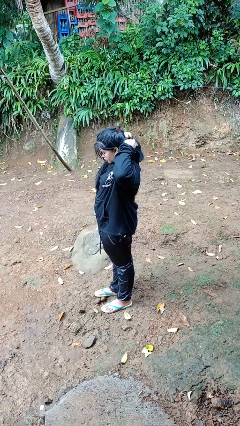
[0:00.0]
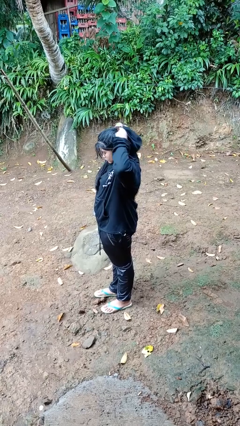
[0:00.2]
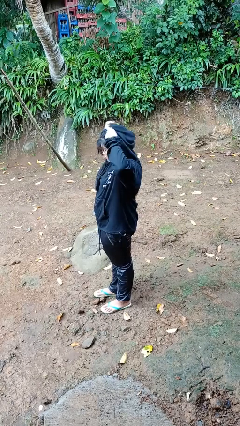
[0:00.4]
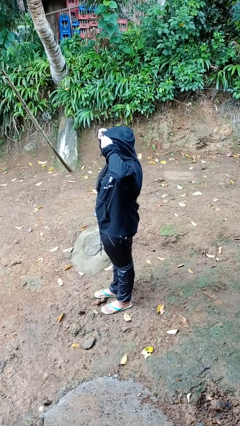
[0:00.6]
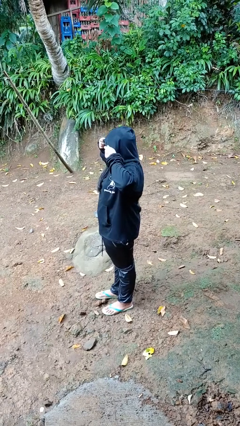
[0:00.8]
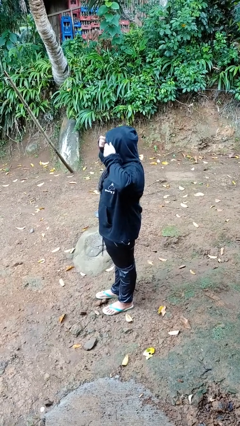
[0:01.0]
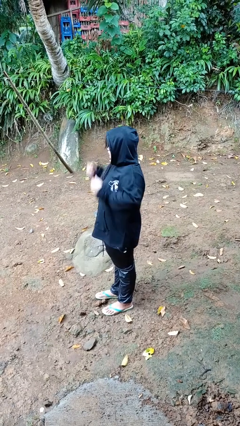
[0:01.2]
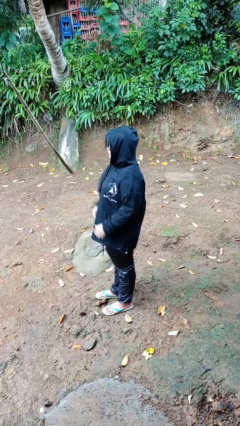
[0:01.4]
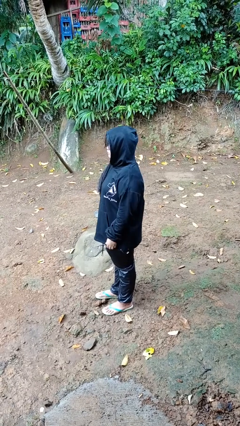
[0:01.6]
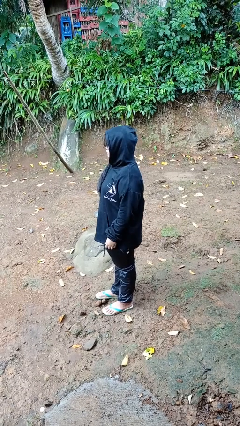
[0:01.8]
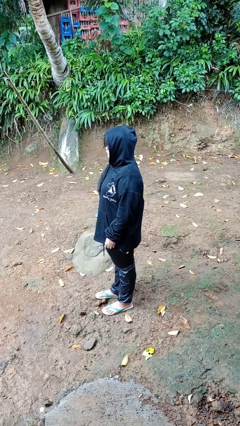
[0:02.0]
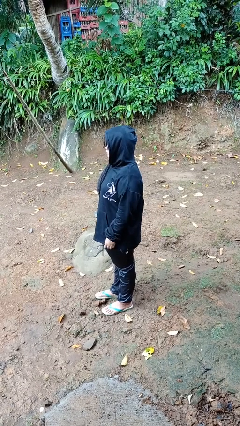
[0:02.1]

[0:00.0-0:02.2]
person puts on hoodie

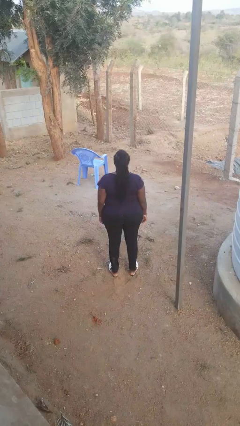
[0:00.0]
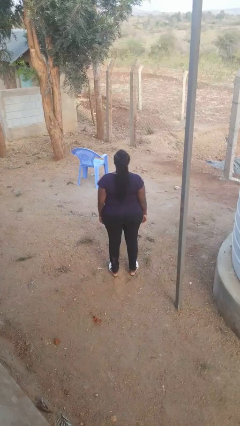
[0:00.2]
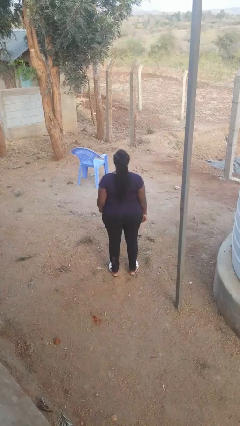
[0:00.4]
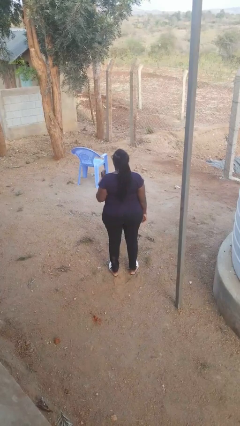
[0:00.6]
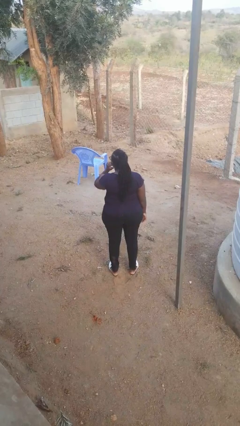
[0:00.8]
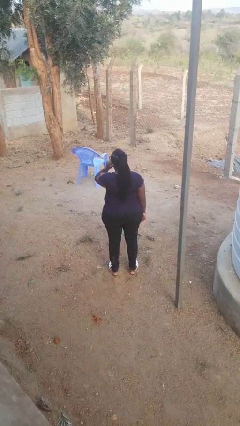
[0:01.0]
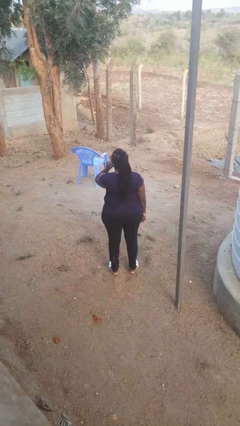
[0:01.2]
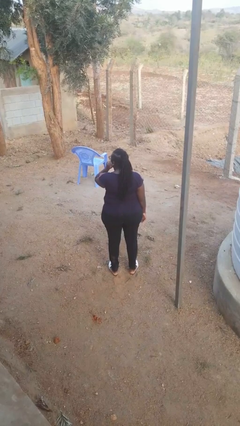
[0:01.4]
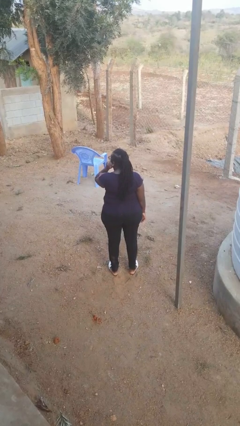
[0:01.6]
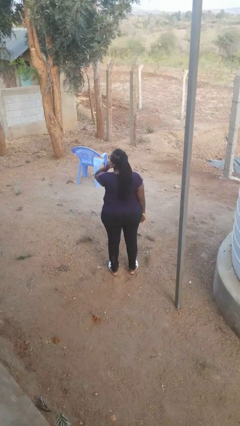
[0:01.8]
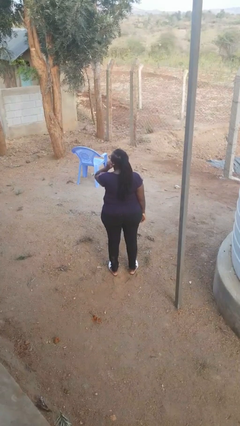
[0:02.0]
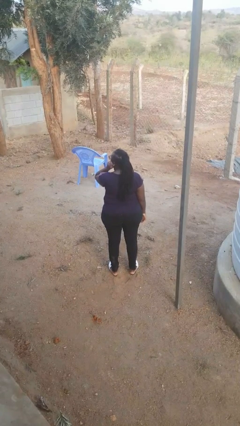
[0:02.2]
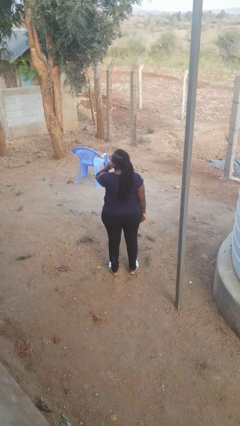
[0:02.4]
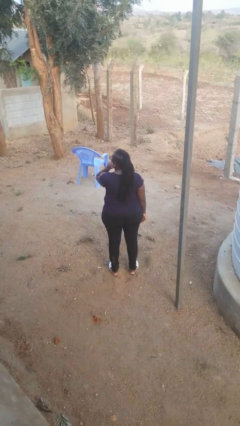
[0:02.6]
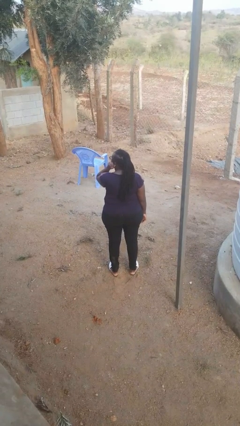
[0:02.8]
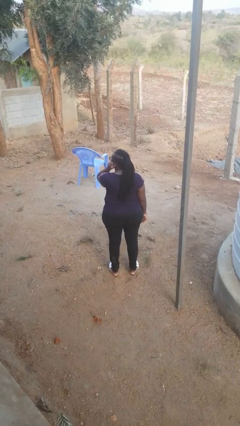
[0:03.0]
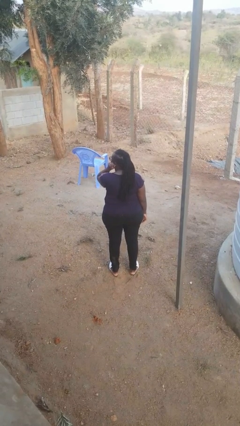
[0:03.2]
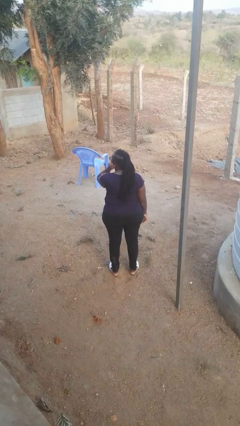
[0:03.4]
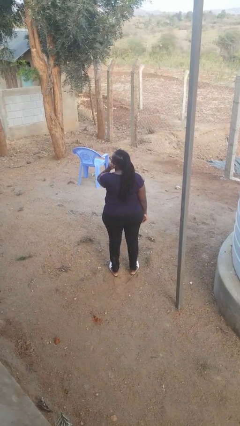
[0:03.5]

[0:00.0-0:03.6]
person touches earlobe

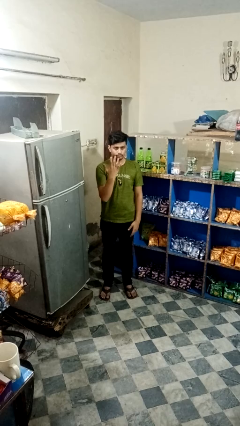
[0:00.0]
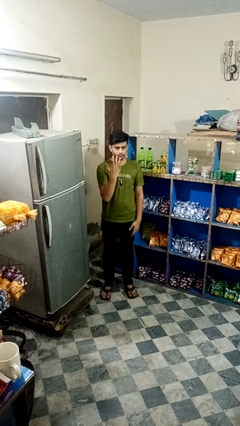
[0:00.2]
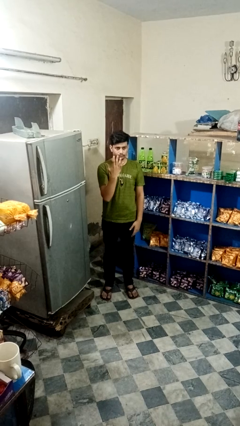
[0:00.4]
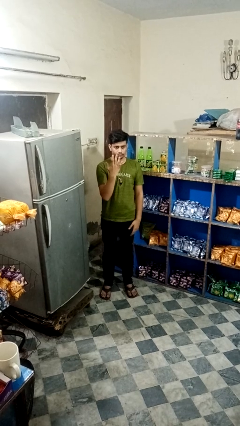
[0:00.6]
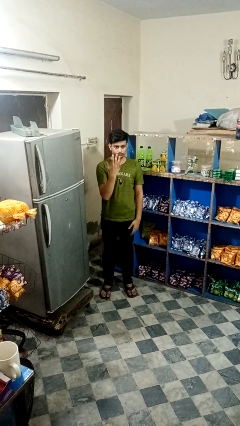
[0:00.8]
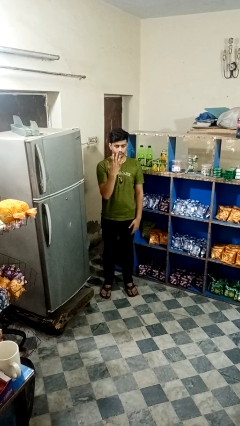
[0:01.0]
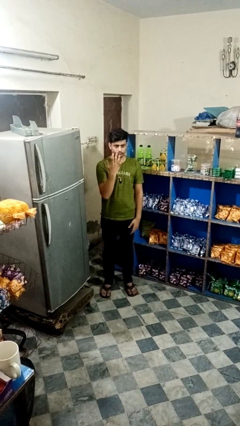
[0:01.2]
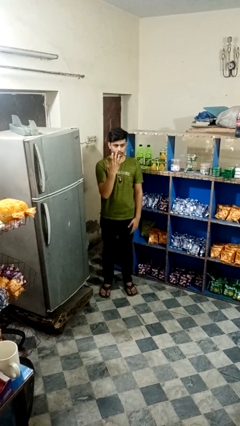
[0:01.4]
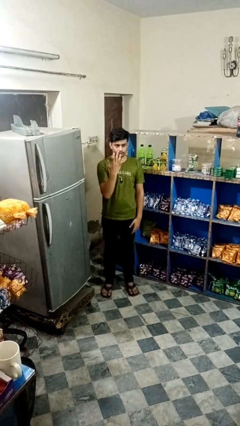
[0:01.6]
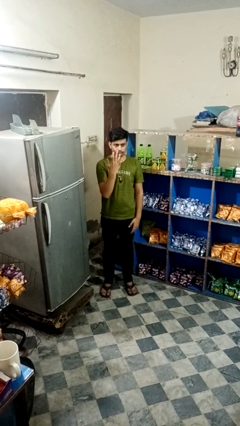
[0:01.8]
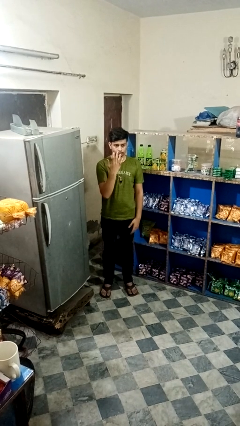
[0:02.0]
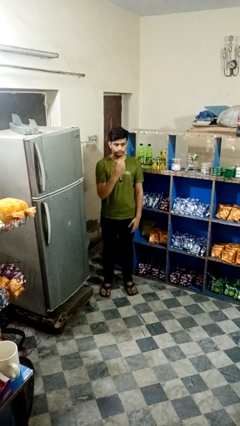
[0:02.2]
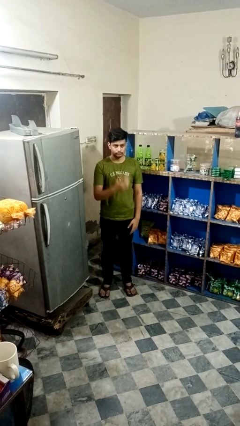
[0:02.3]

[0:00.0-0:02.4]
person gestures number five

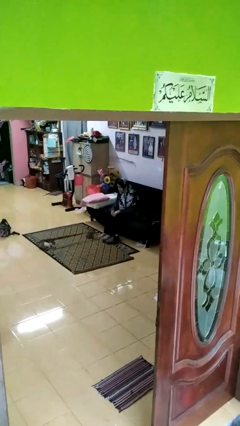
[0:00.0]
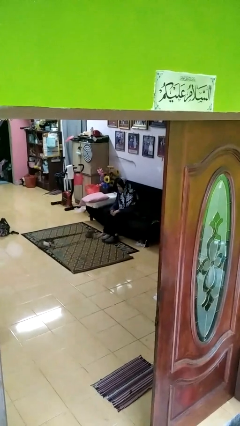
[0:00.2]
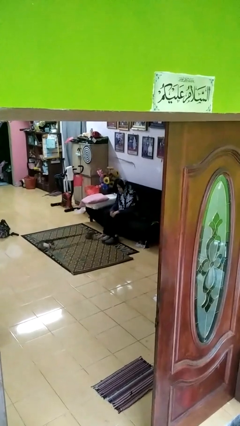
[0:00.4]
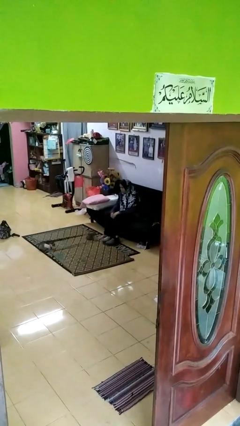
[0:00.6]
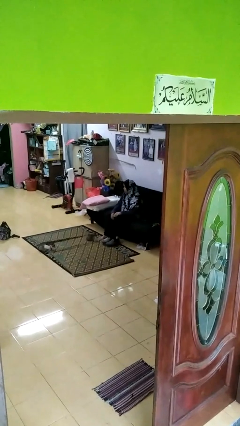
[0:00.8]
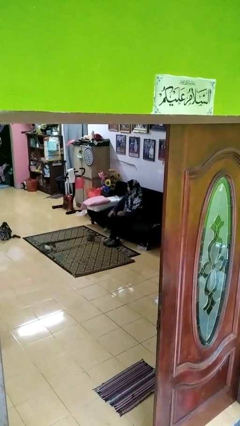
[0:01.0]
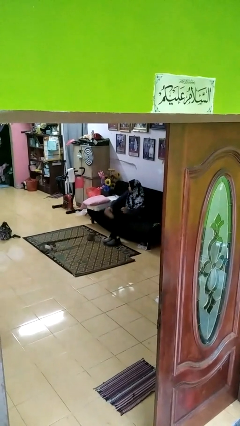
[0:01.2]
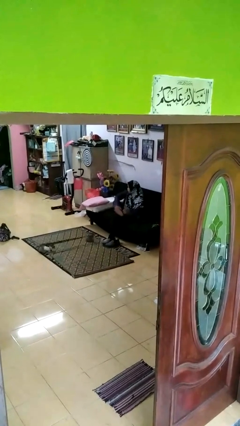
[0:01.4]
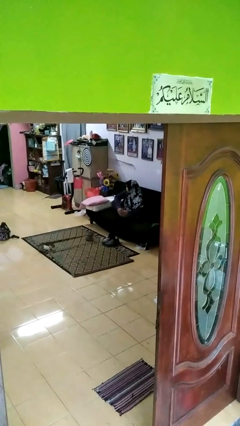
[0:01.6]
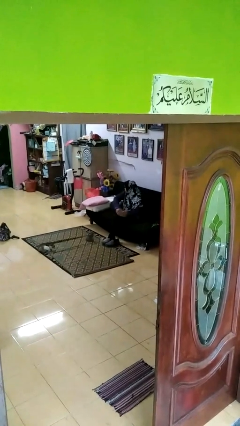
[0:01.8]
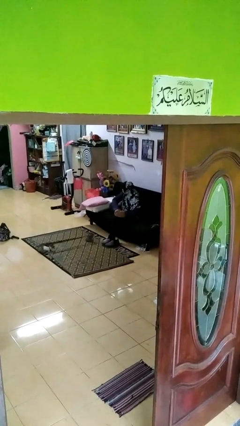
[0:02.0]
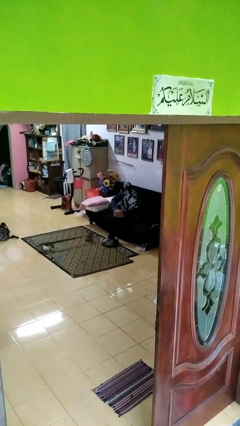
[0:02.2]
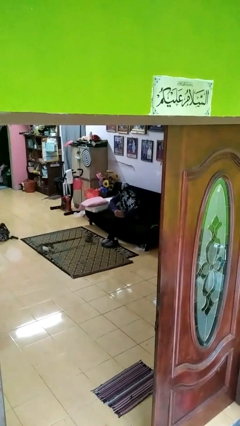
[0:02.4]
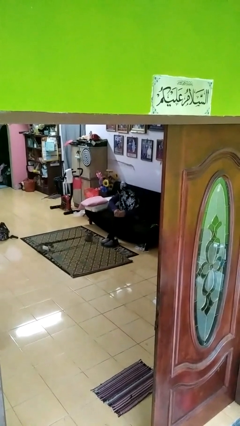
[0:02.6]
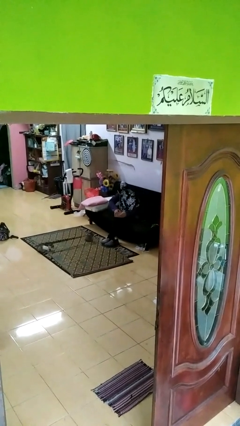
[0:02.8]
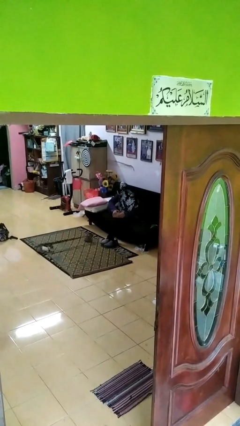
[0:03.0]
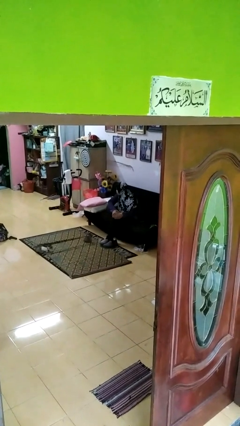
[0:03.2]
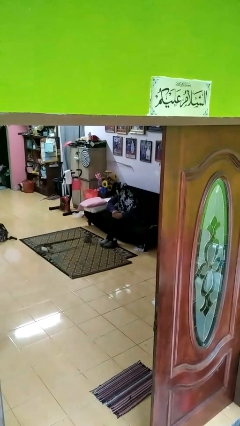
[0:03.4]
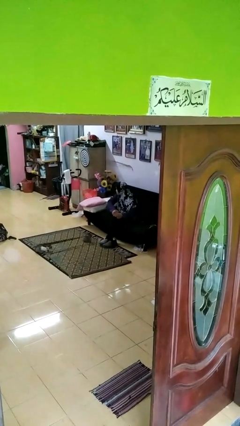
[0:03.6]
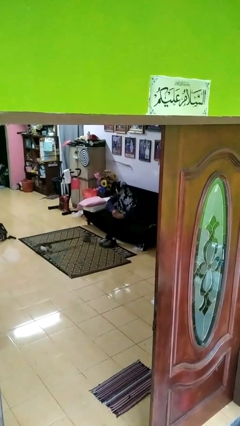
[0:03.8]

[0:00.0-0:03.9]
person rubs foot

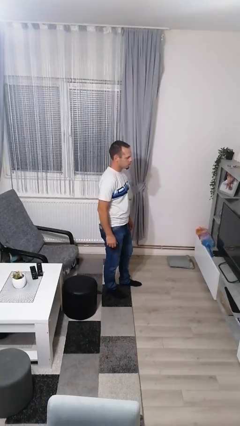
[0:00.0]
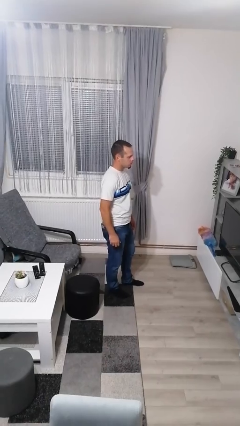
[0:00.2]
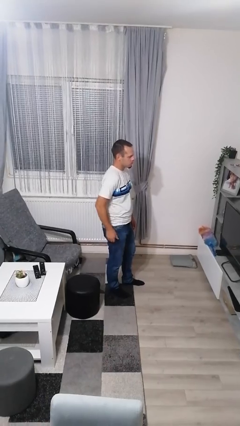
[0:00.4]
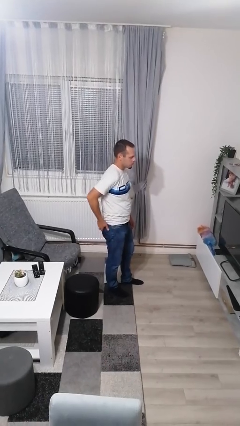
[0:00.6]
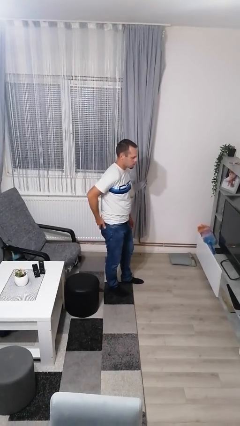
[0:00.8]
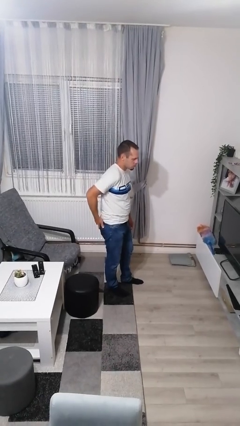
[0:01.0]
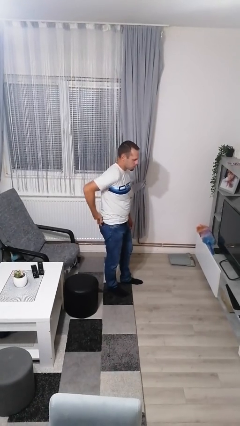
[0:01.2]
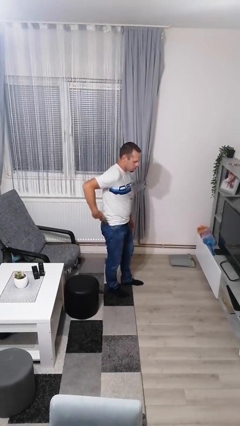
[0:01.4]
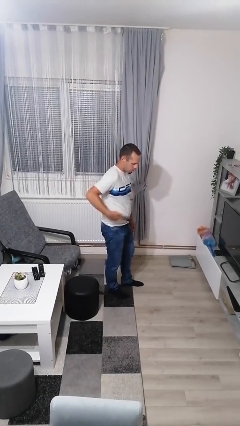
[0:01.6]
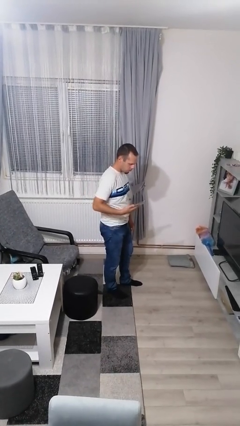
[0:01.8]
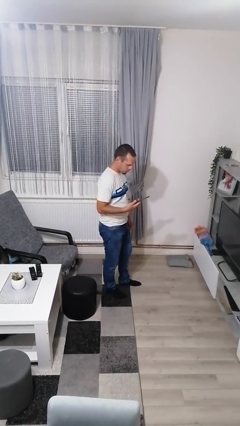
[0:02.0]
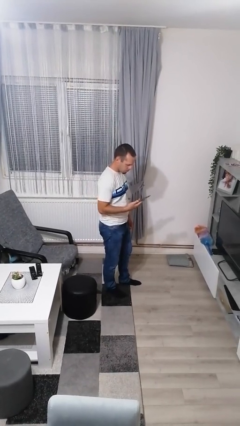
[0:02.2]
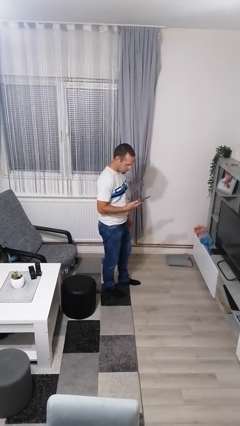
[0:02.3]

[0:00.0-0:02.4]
person takes phone from pocket

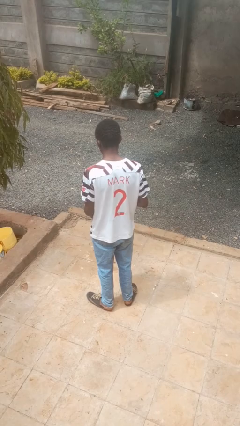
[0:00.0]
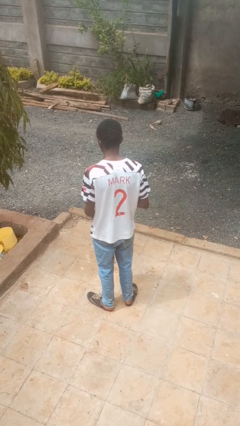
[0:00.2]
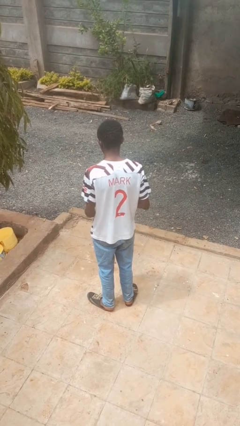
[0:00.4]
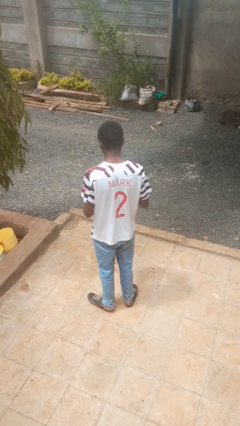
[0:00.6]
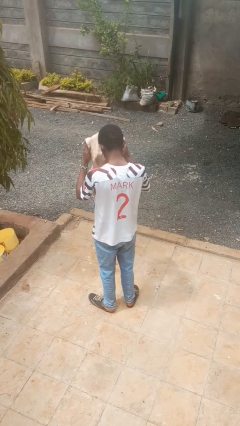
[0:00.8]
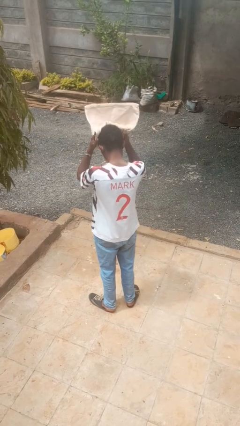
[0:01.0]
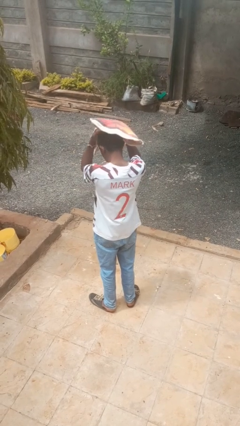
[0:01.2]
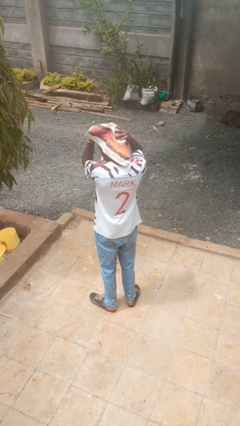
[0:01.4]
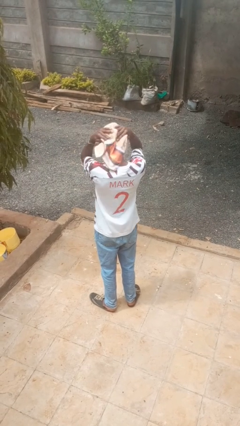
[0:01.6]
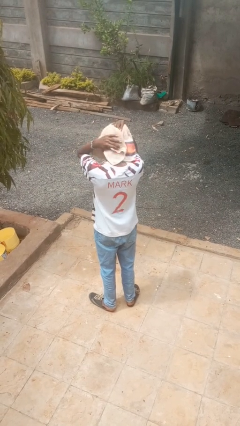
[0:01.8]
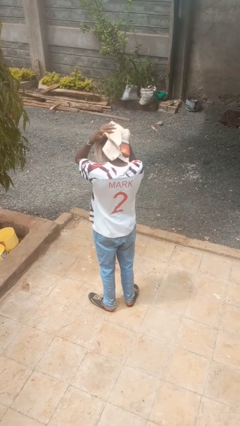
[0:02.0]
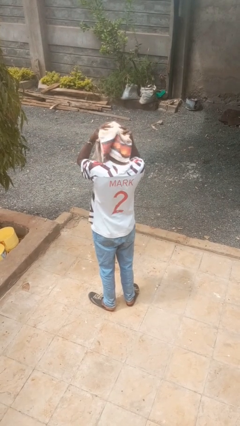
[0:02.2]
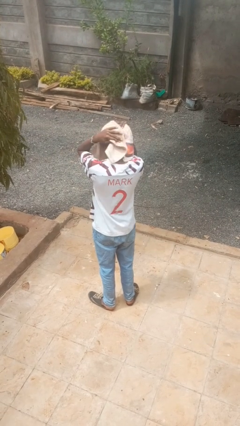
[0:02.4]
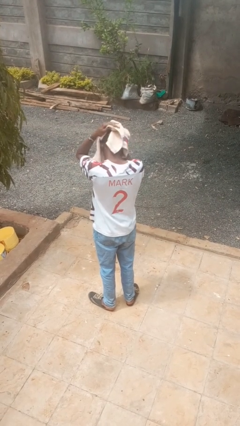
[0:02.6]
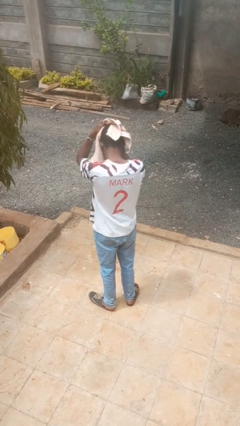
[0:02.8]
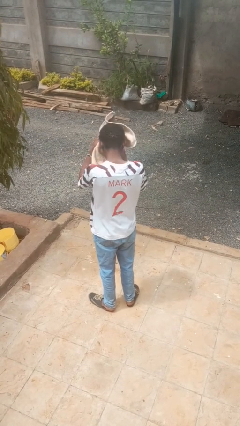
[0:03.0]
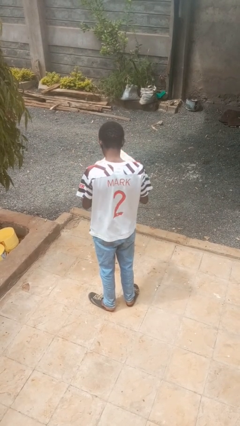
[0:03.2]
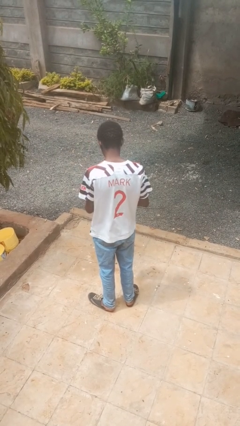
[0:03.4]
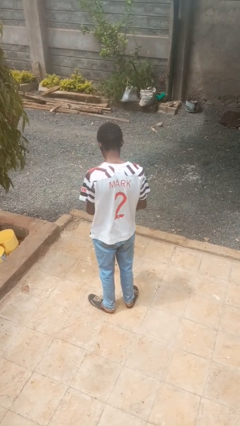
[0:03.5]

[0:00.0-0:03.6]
person dries hair with towel
